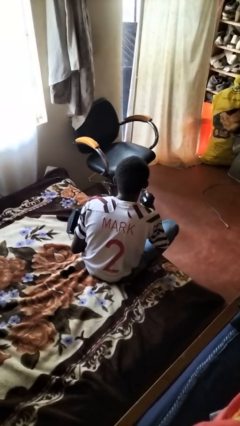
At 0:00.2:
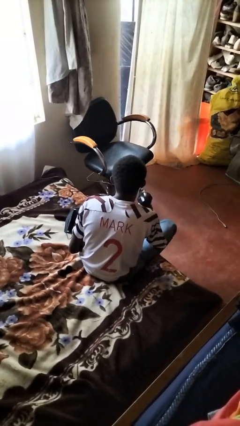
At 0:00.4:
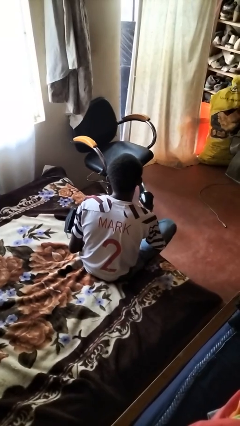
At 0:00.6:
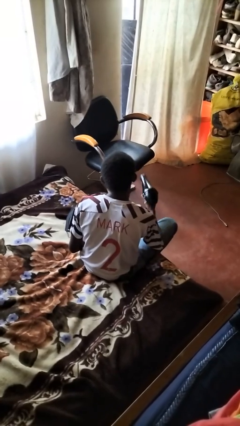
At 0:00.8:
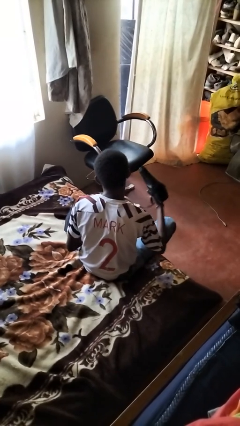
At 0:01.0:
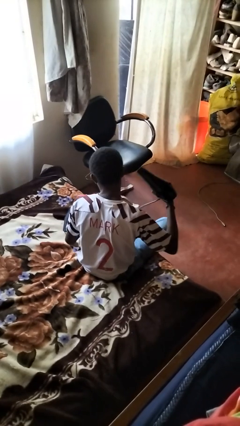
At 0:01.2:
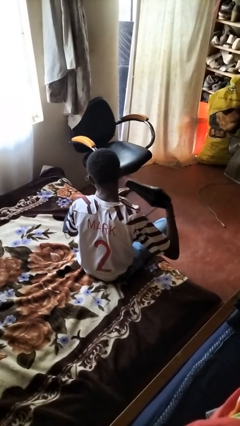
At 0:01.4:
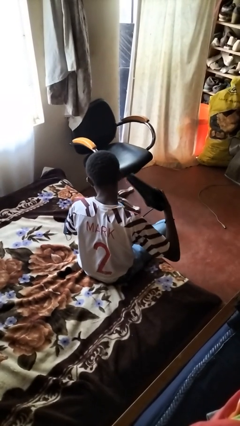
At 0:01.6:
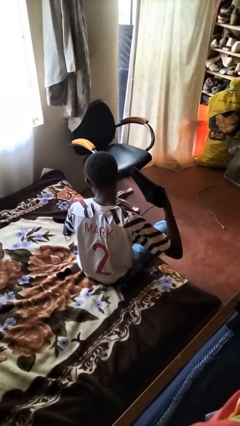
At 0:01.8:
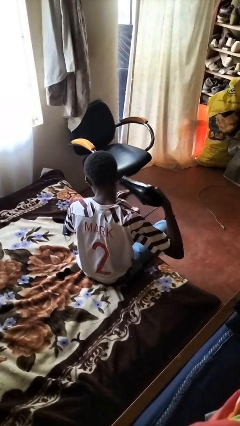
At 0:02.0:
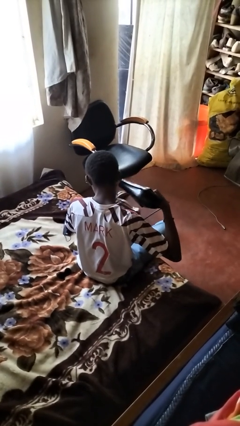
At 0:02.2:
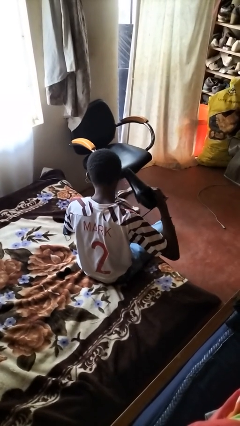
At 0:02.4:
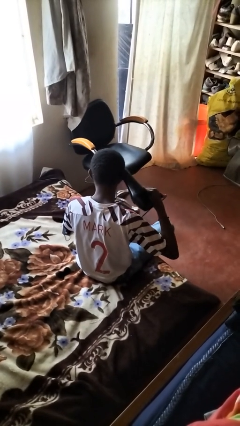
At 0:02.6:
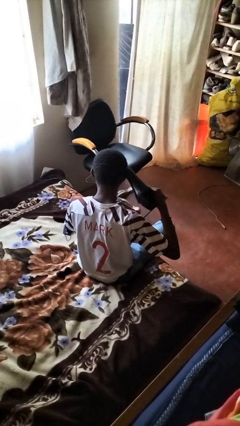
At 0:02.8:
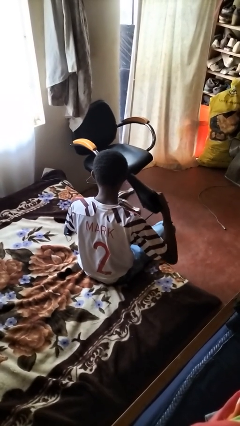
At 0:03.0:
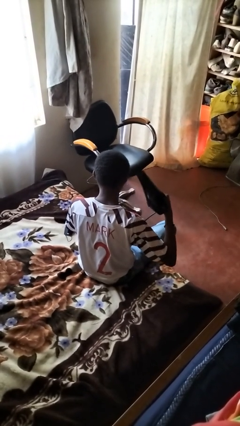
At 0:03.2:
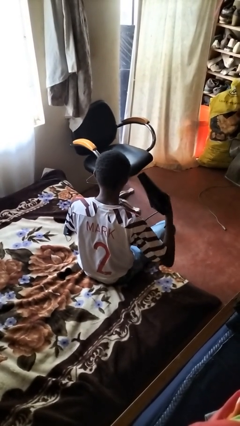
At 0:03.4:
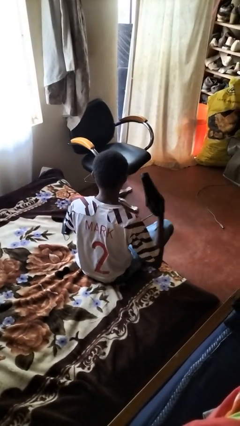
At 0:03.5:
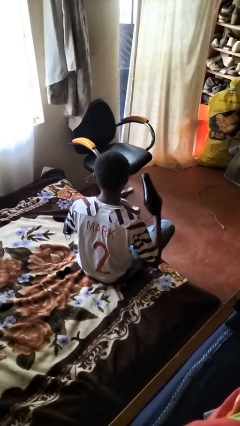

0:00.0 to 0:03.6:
person dries hair with hairdryer

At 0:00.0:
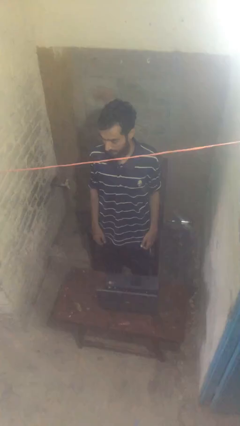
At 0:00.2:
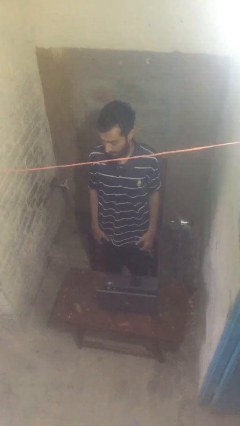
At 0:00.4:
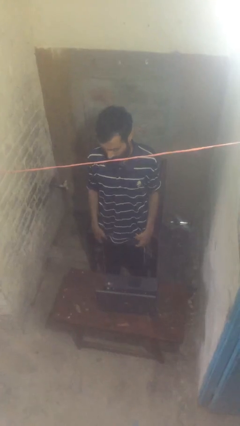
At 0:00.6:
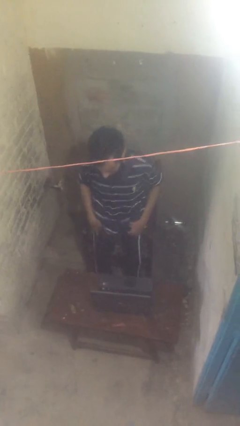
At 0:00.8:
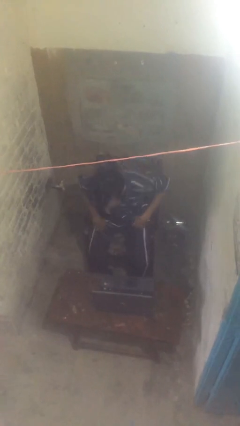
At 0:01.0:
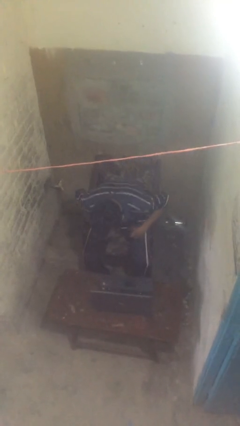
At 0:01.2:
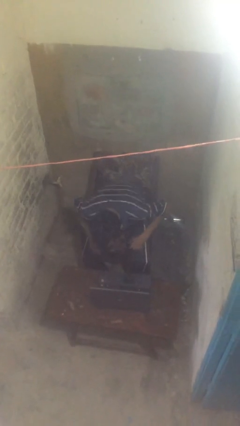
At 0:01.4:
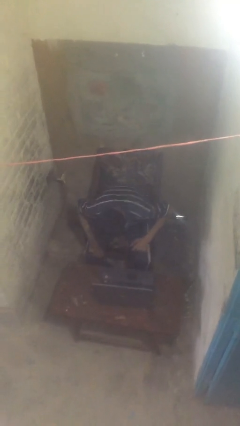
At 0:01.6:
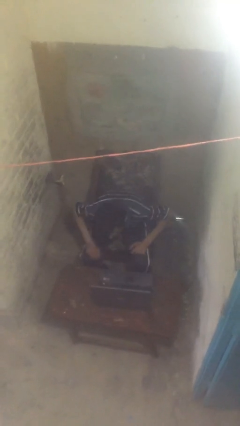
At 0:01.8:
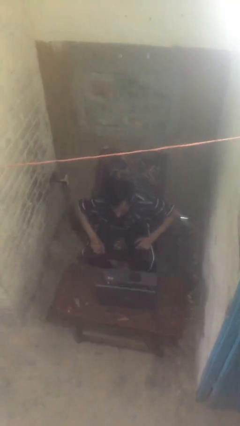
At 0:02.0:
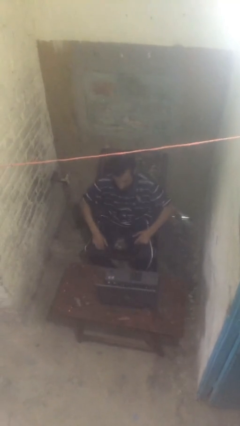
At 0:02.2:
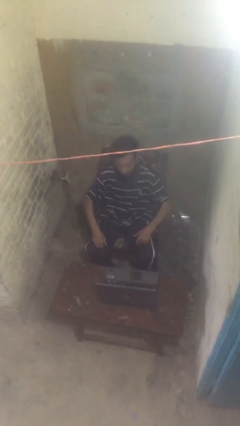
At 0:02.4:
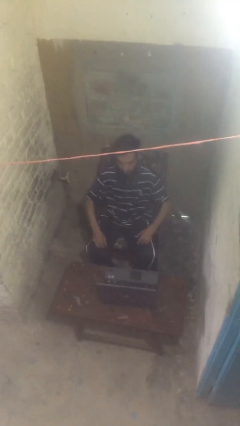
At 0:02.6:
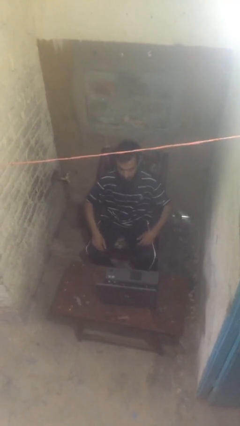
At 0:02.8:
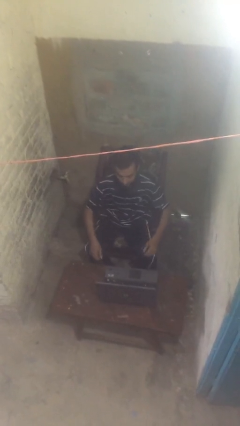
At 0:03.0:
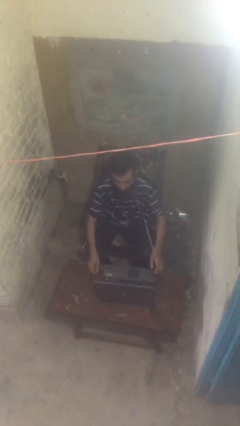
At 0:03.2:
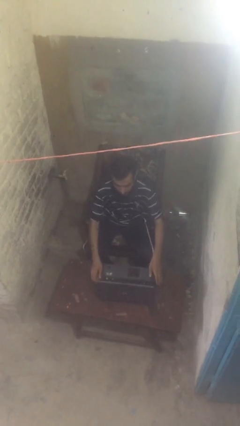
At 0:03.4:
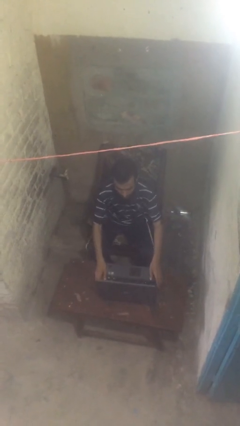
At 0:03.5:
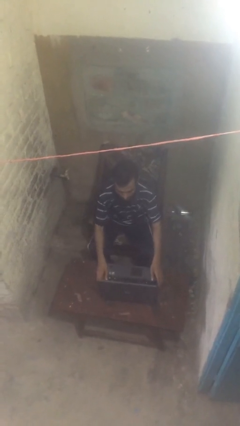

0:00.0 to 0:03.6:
person sits down

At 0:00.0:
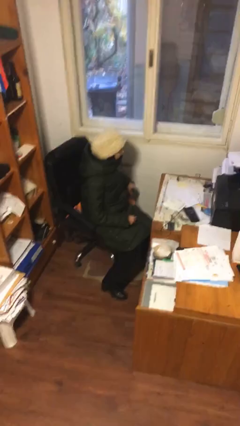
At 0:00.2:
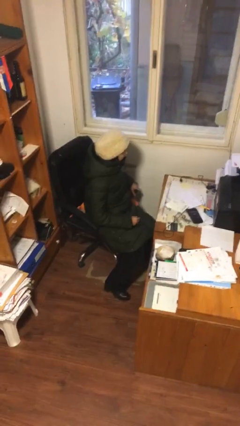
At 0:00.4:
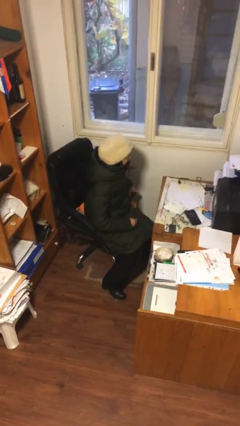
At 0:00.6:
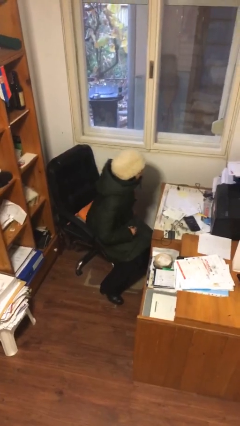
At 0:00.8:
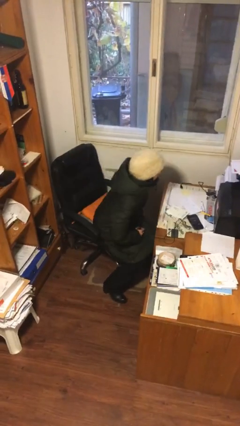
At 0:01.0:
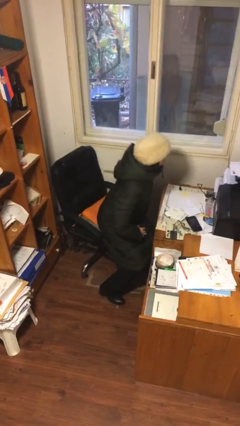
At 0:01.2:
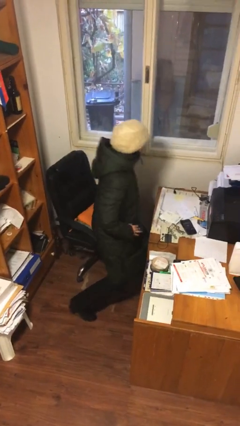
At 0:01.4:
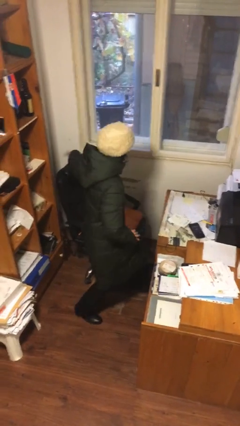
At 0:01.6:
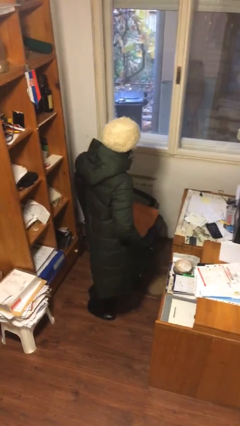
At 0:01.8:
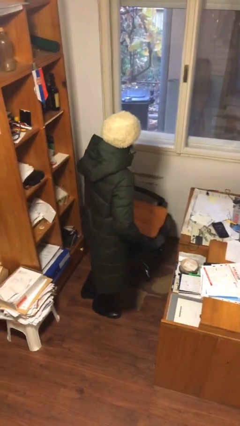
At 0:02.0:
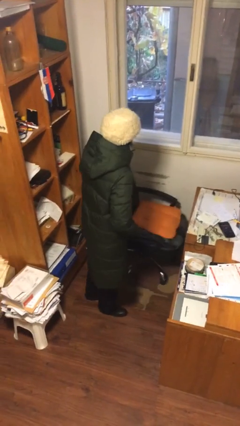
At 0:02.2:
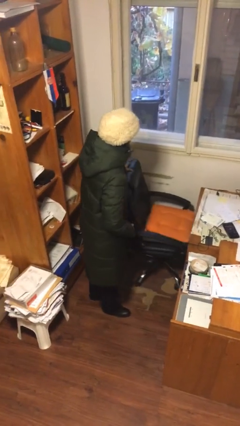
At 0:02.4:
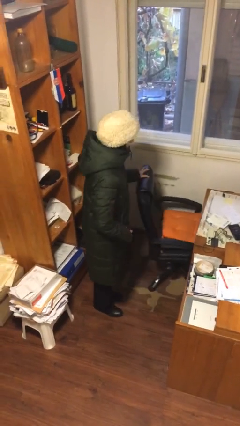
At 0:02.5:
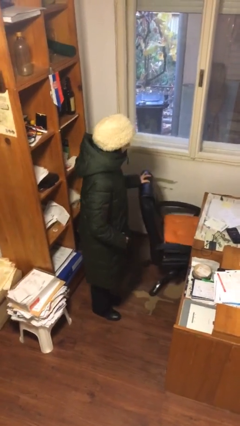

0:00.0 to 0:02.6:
person stands up

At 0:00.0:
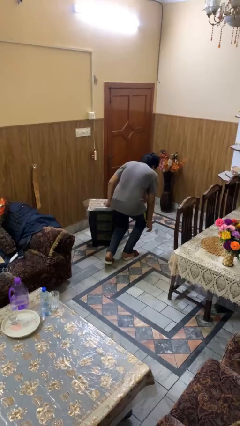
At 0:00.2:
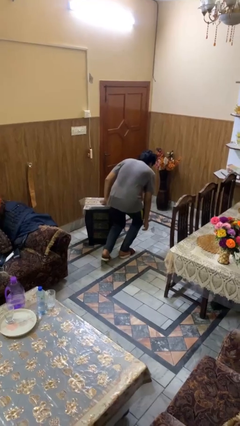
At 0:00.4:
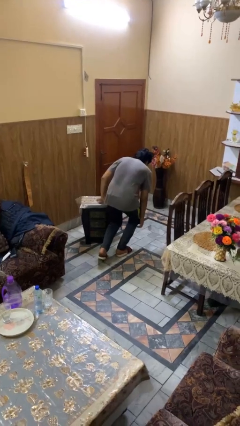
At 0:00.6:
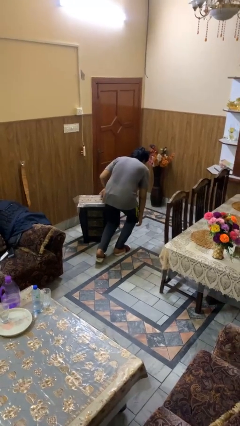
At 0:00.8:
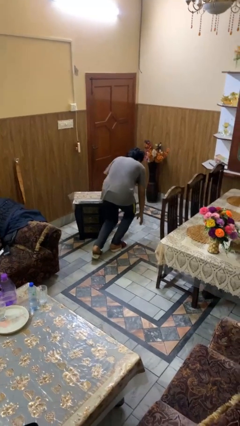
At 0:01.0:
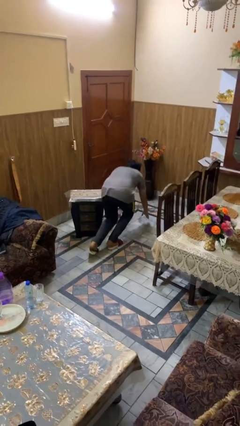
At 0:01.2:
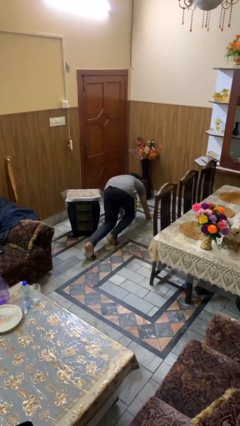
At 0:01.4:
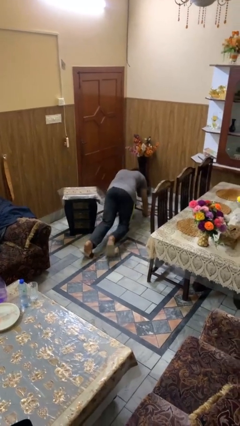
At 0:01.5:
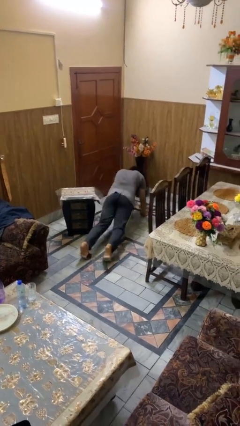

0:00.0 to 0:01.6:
person lies down on floor

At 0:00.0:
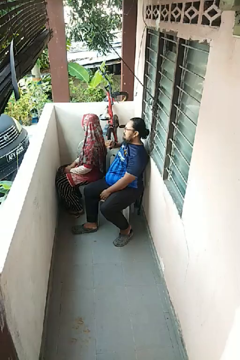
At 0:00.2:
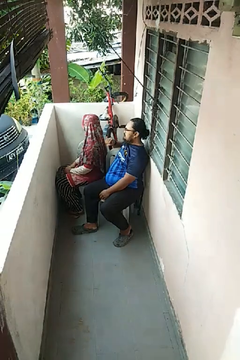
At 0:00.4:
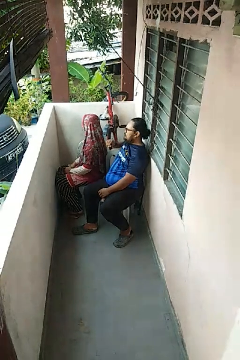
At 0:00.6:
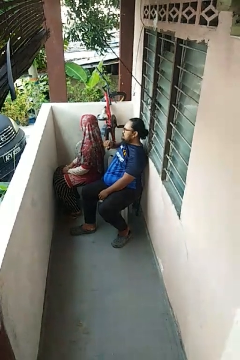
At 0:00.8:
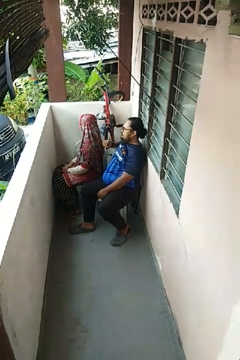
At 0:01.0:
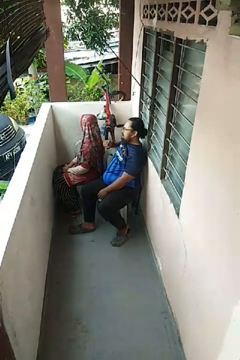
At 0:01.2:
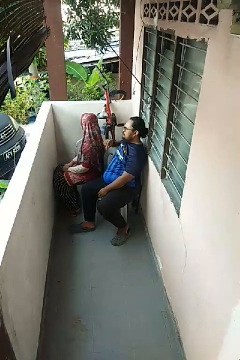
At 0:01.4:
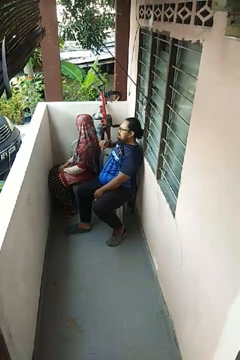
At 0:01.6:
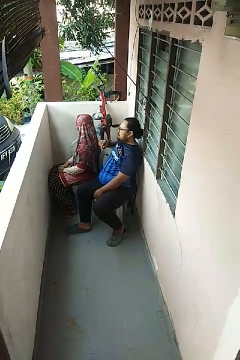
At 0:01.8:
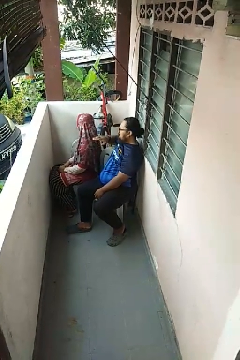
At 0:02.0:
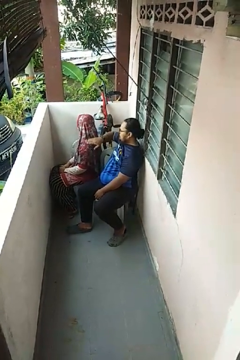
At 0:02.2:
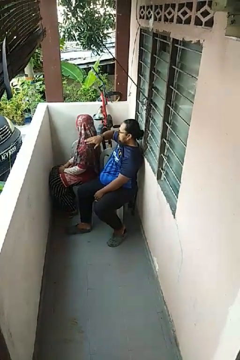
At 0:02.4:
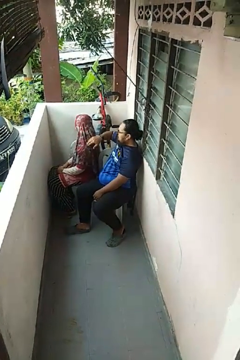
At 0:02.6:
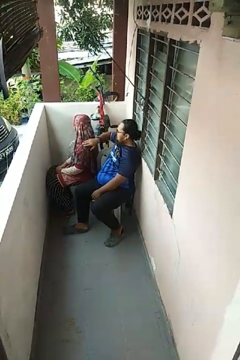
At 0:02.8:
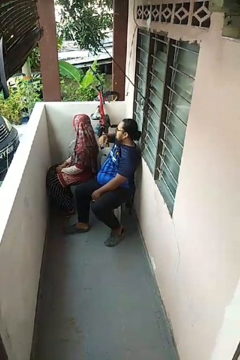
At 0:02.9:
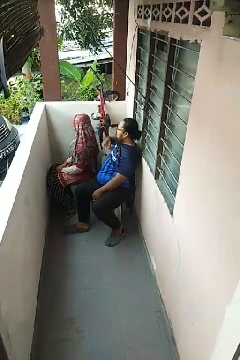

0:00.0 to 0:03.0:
person touches back of person

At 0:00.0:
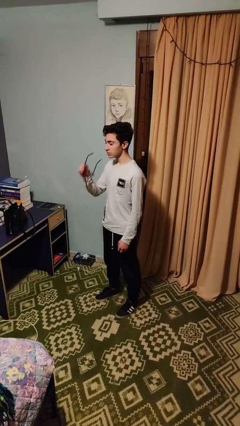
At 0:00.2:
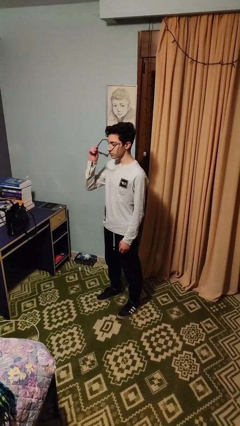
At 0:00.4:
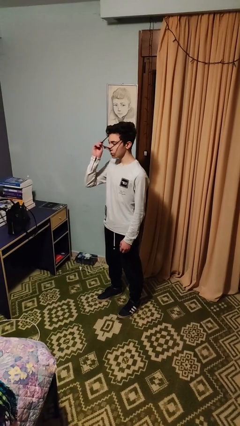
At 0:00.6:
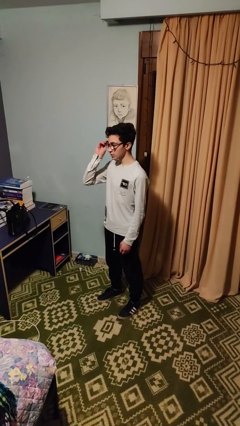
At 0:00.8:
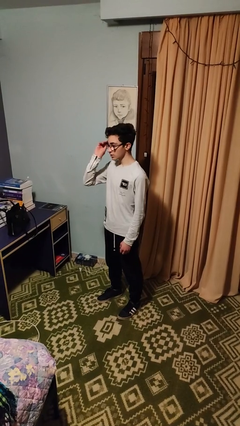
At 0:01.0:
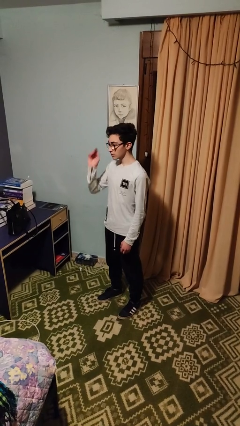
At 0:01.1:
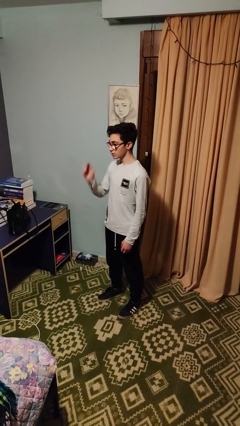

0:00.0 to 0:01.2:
person puts on glasses

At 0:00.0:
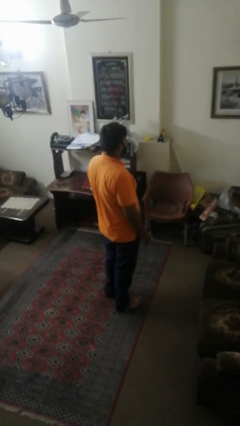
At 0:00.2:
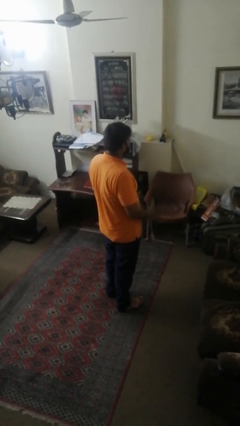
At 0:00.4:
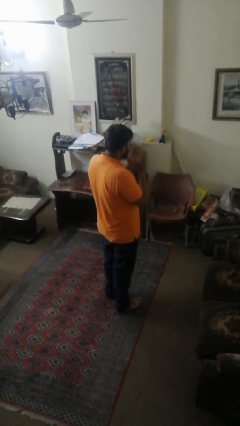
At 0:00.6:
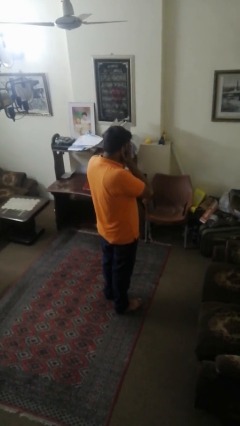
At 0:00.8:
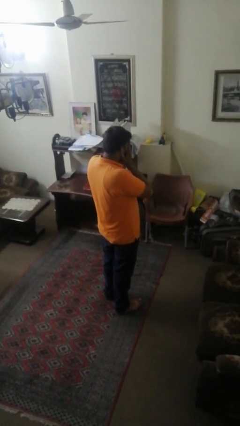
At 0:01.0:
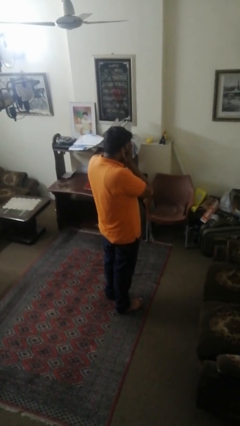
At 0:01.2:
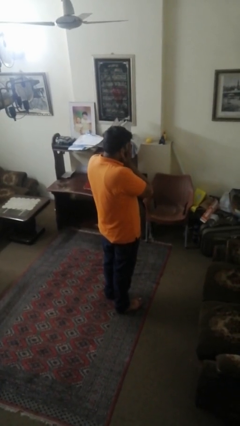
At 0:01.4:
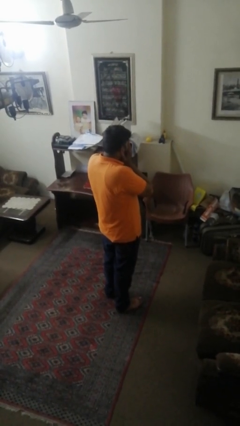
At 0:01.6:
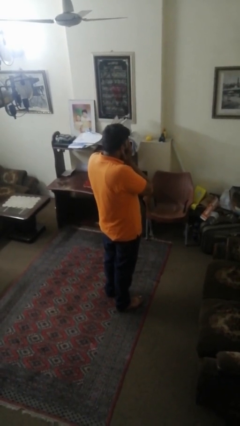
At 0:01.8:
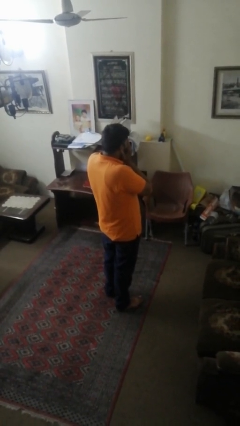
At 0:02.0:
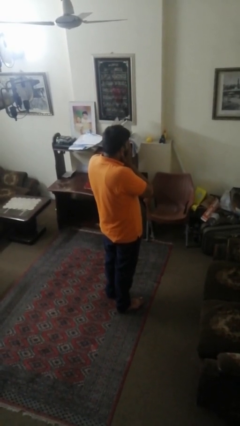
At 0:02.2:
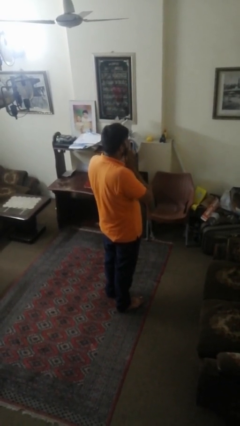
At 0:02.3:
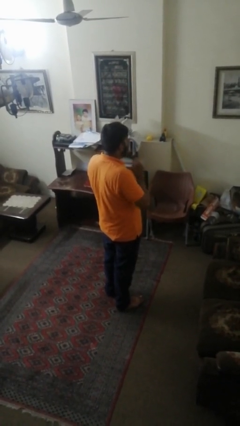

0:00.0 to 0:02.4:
person covers face with hands
